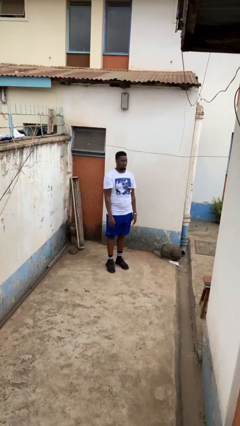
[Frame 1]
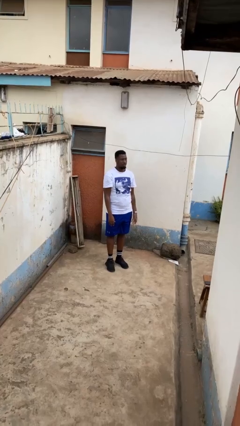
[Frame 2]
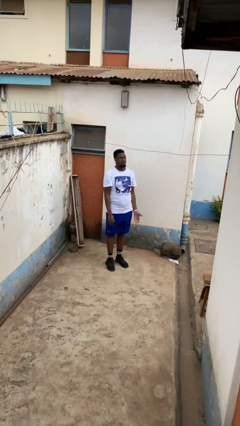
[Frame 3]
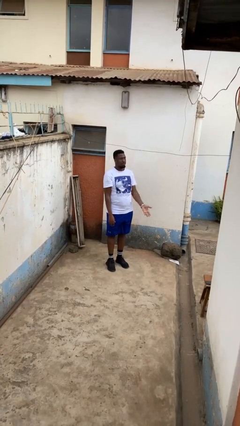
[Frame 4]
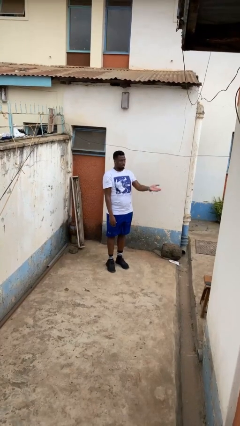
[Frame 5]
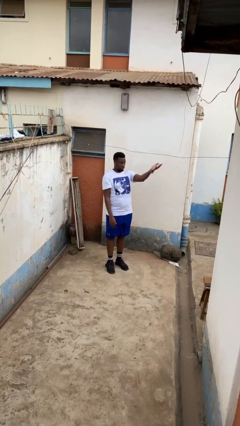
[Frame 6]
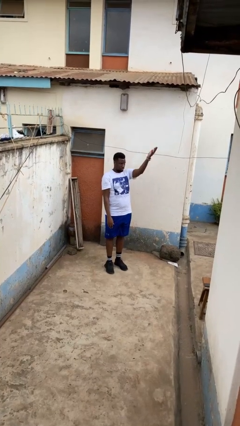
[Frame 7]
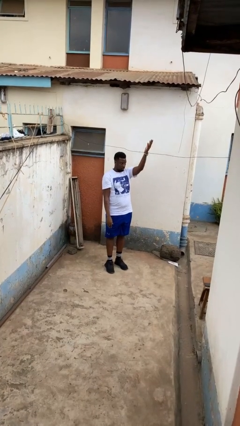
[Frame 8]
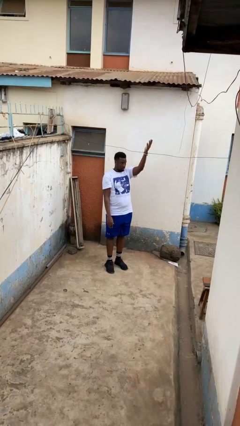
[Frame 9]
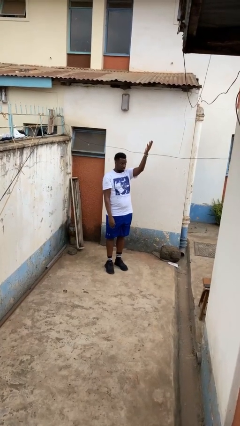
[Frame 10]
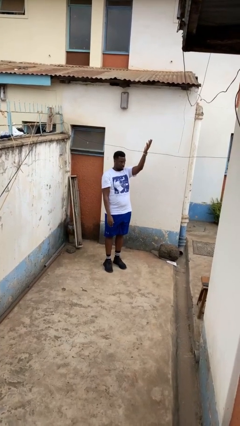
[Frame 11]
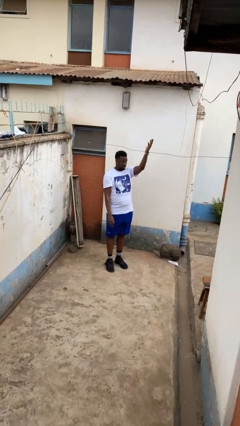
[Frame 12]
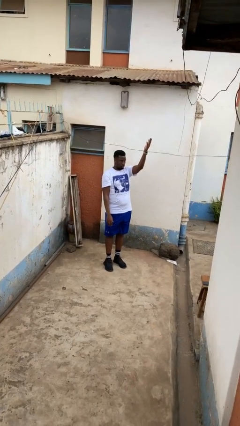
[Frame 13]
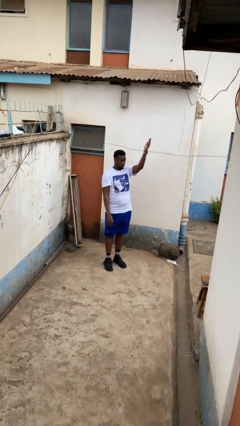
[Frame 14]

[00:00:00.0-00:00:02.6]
person gestures swipe up

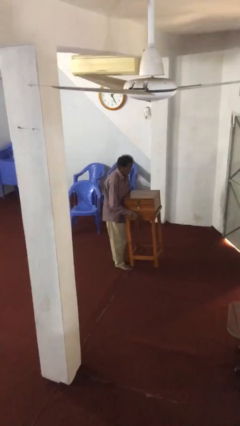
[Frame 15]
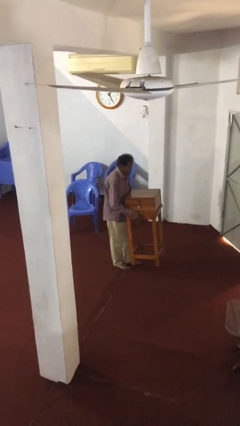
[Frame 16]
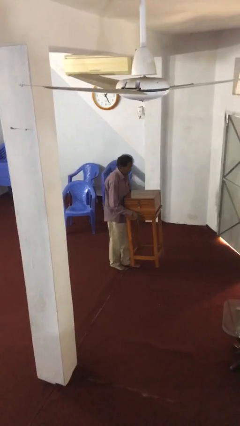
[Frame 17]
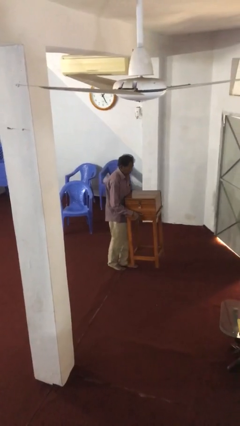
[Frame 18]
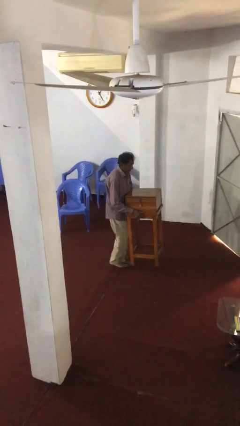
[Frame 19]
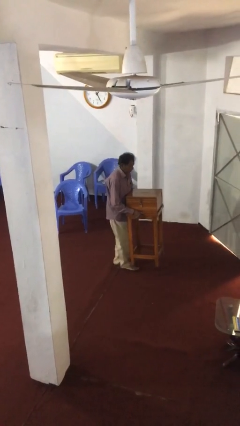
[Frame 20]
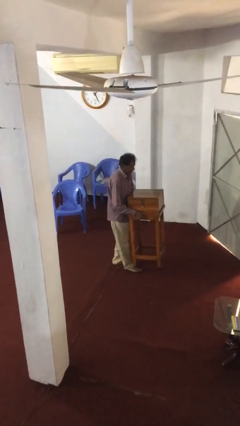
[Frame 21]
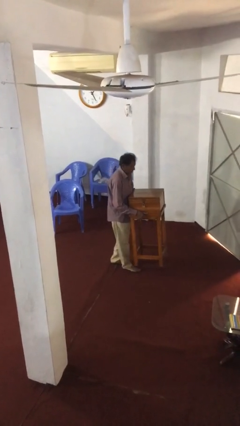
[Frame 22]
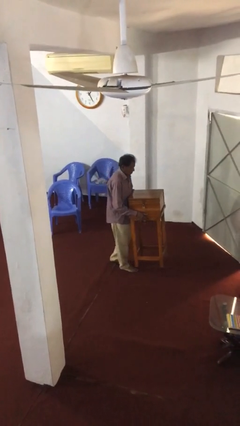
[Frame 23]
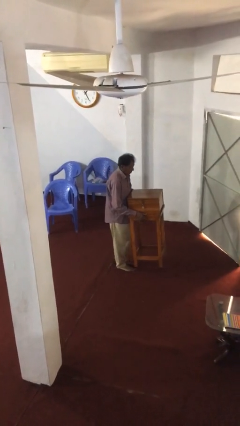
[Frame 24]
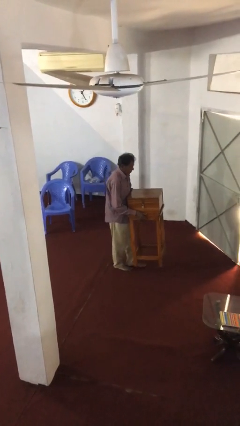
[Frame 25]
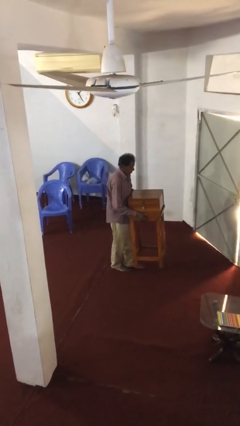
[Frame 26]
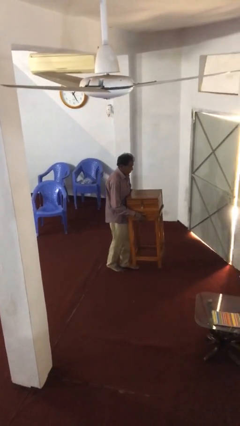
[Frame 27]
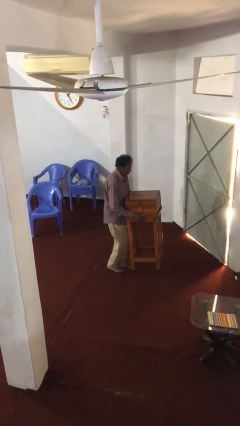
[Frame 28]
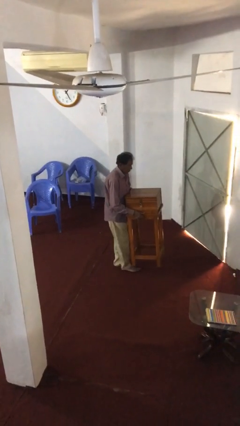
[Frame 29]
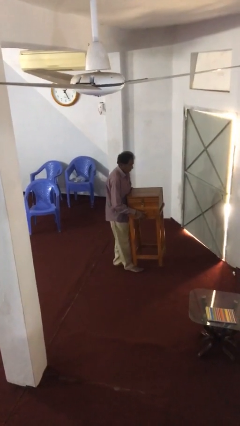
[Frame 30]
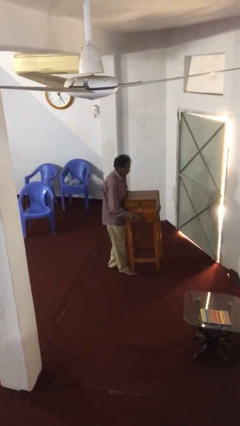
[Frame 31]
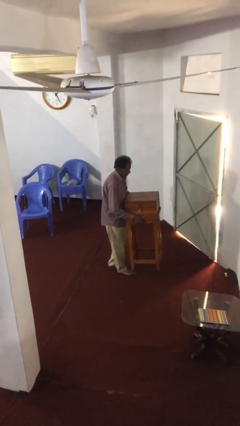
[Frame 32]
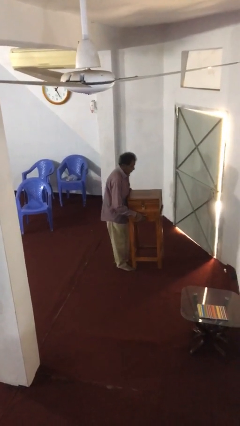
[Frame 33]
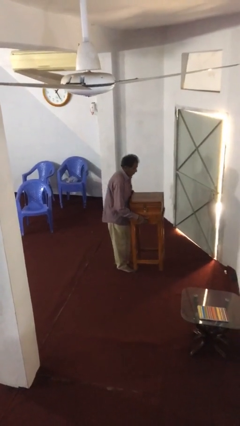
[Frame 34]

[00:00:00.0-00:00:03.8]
person carries heavy object

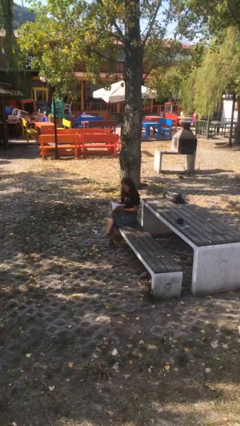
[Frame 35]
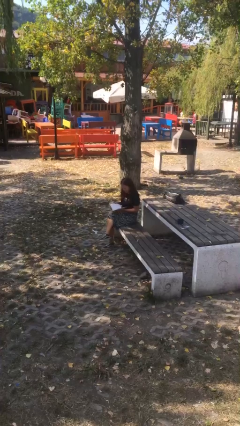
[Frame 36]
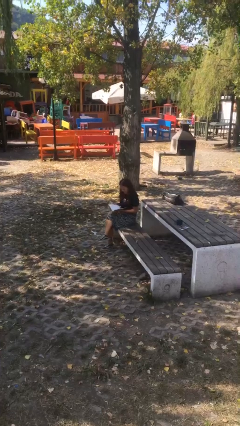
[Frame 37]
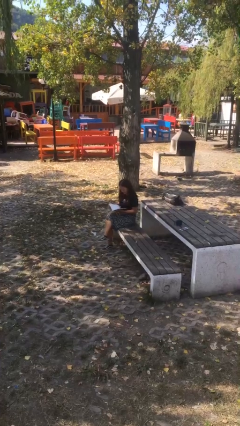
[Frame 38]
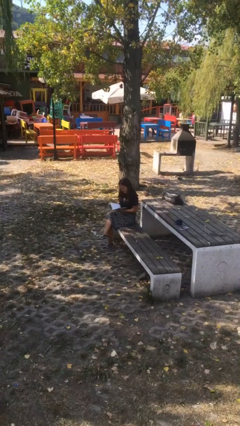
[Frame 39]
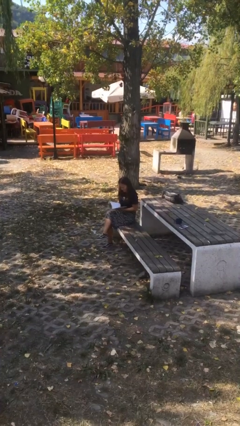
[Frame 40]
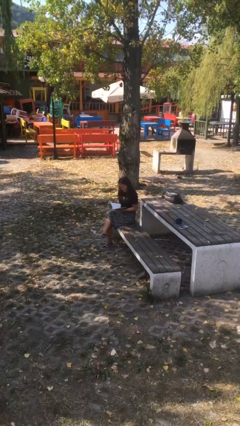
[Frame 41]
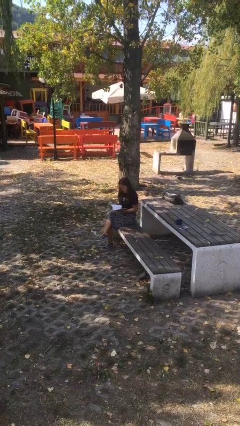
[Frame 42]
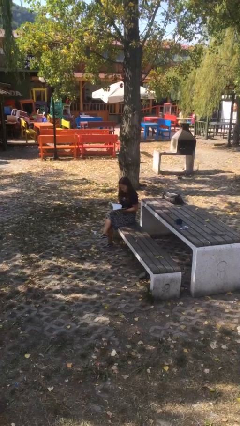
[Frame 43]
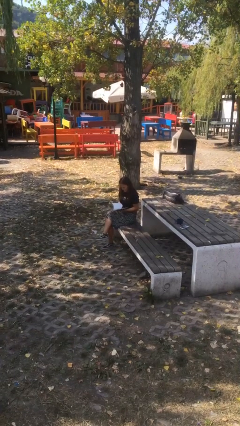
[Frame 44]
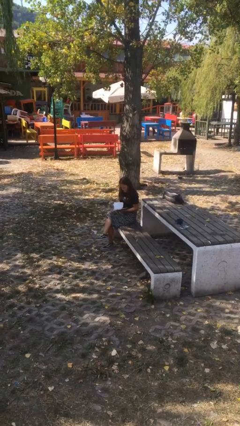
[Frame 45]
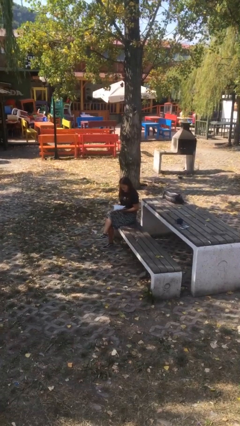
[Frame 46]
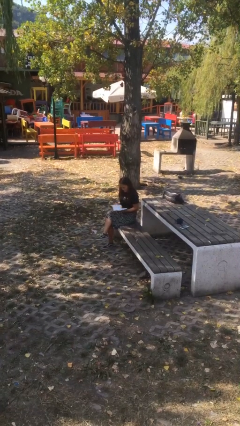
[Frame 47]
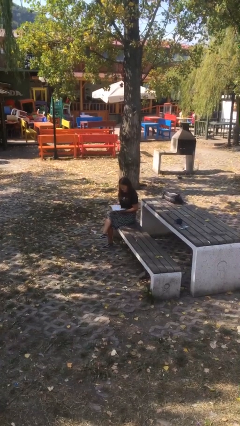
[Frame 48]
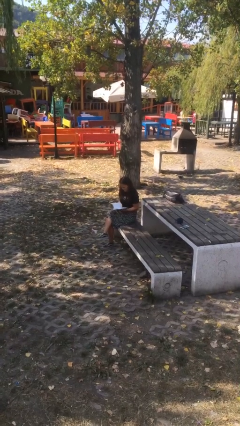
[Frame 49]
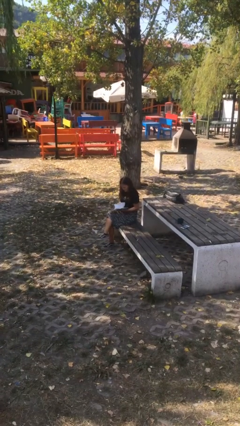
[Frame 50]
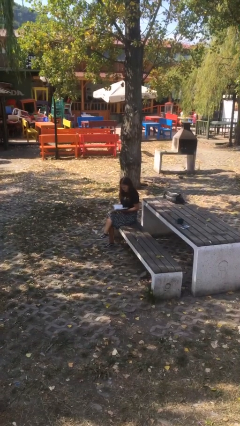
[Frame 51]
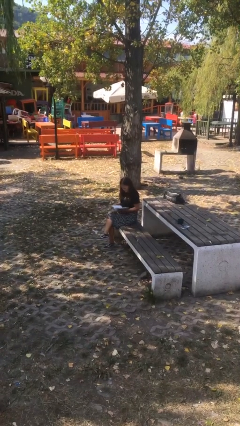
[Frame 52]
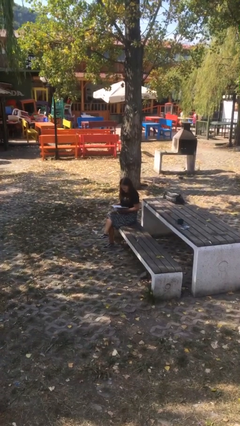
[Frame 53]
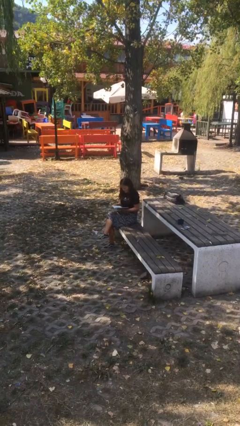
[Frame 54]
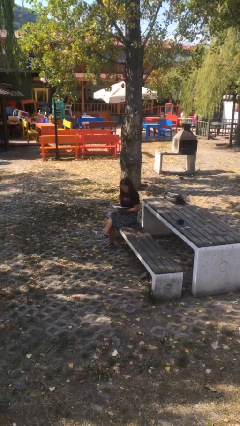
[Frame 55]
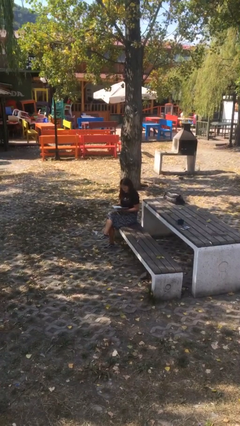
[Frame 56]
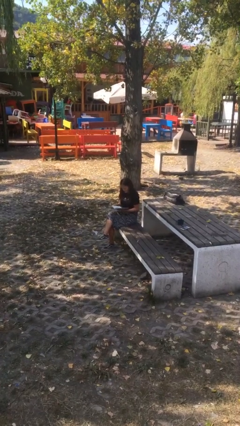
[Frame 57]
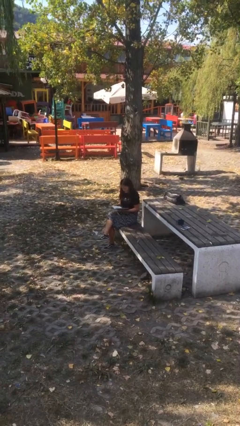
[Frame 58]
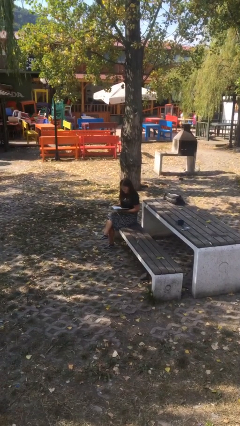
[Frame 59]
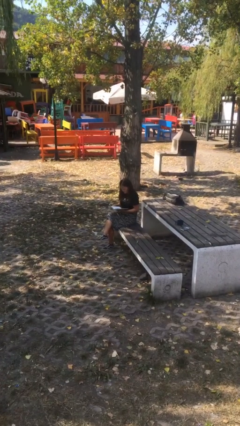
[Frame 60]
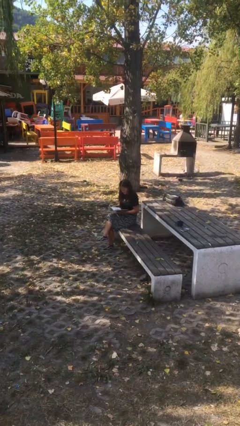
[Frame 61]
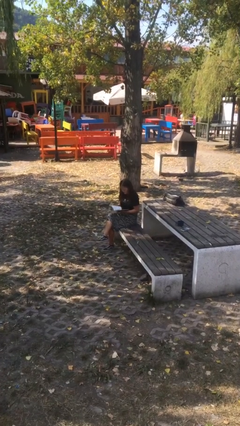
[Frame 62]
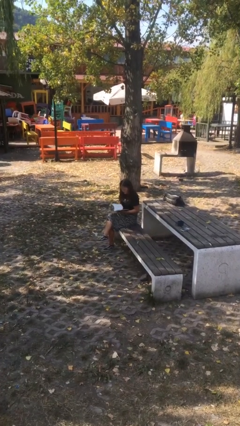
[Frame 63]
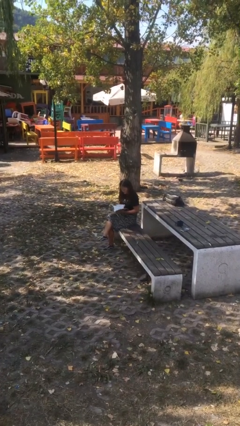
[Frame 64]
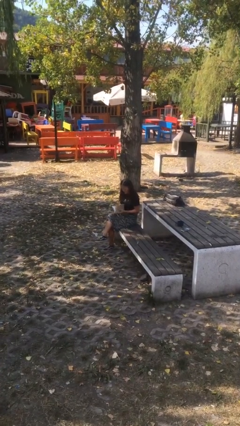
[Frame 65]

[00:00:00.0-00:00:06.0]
person reads document

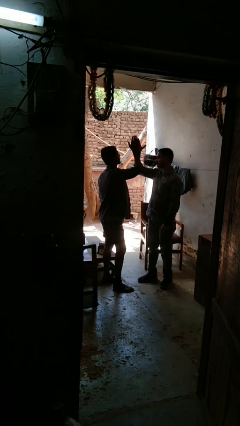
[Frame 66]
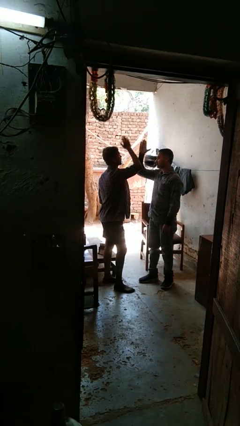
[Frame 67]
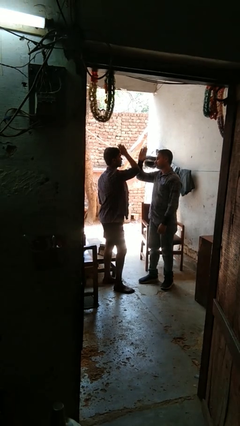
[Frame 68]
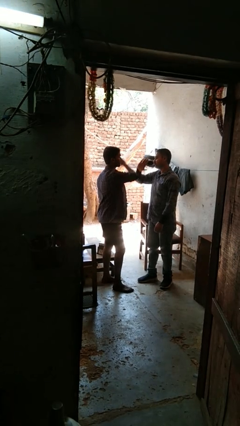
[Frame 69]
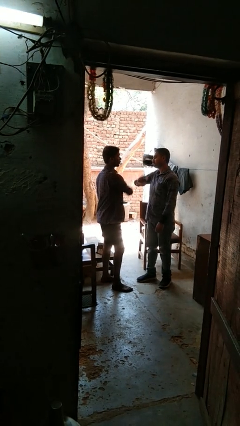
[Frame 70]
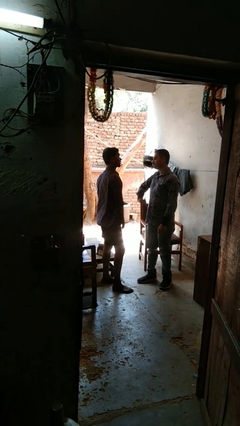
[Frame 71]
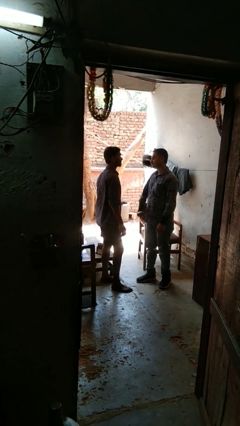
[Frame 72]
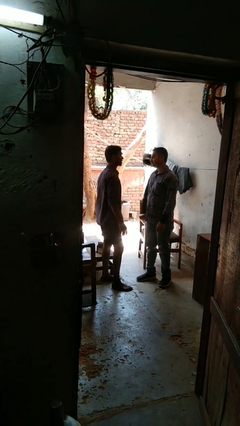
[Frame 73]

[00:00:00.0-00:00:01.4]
person highfives hand

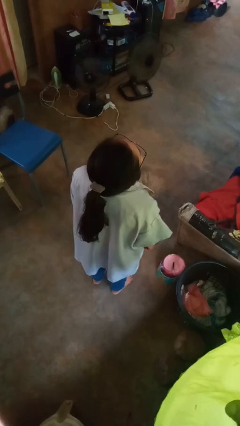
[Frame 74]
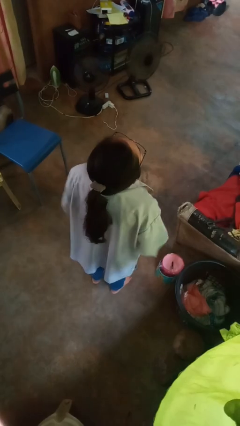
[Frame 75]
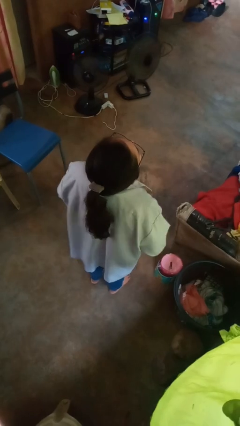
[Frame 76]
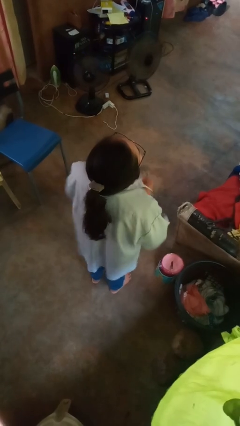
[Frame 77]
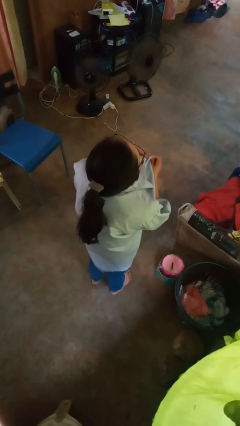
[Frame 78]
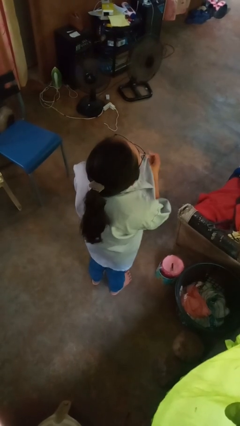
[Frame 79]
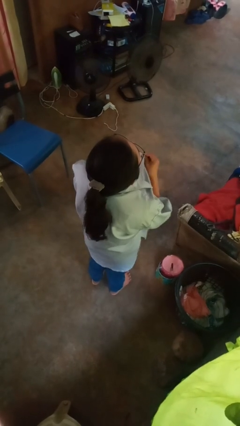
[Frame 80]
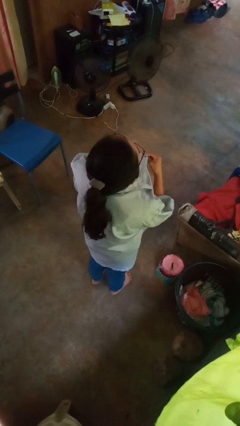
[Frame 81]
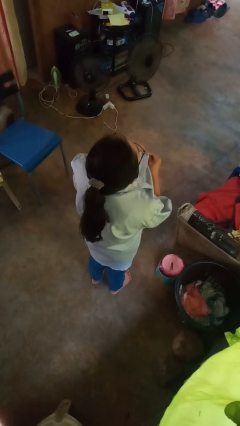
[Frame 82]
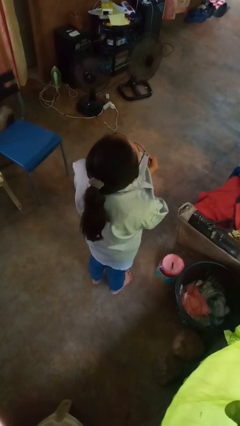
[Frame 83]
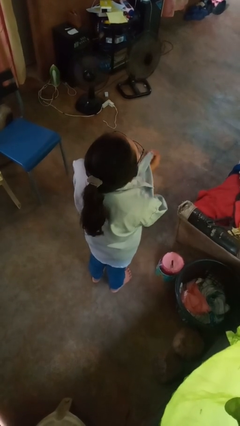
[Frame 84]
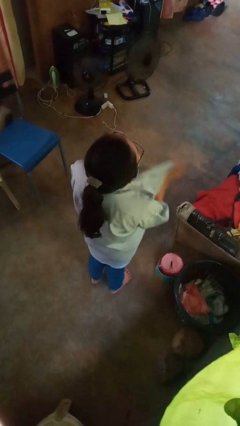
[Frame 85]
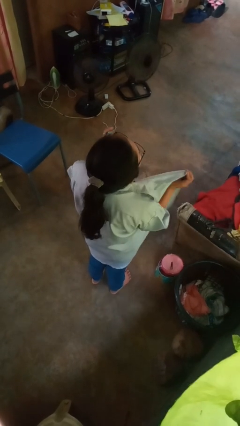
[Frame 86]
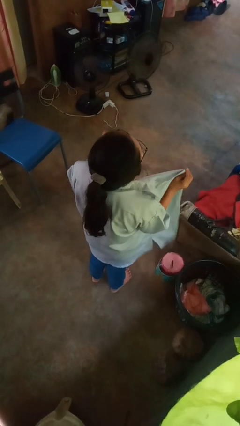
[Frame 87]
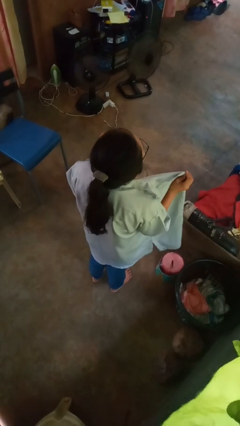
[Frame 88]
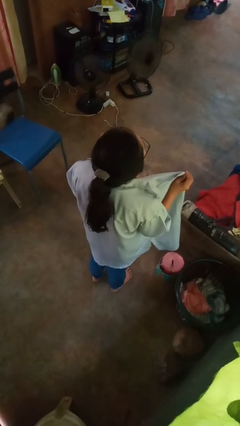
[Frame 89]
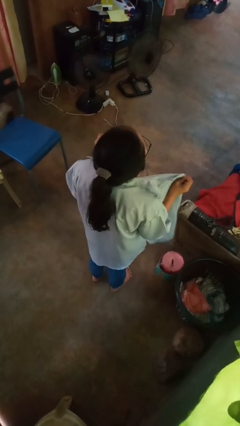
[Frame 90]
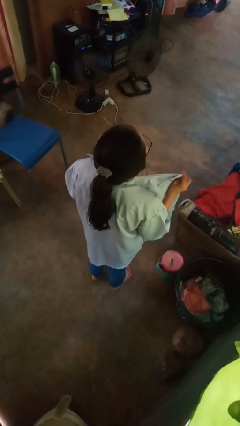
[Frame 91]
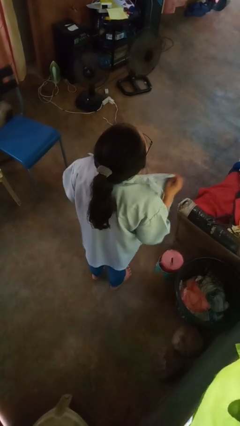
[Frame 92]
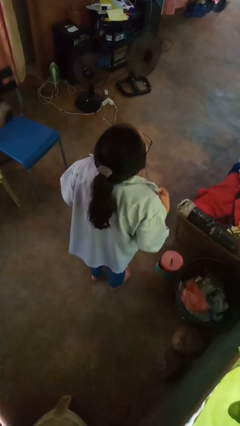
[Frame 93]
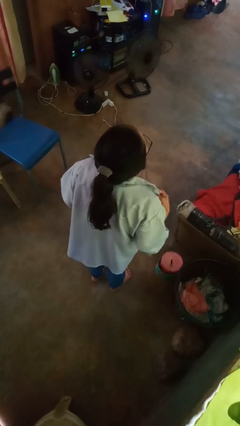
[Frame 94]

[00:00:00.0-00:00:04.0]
person unbuttons shirt
